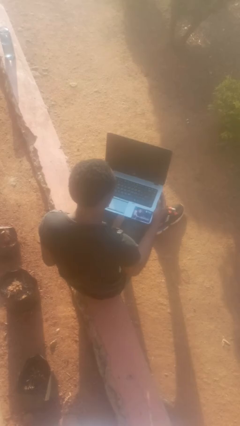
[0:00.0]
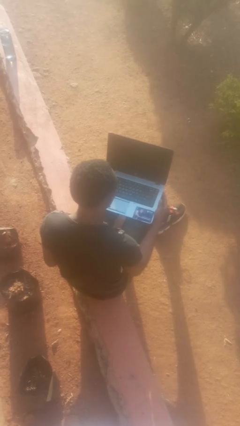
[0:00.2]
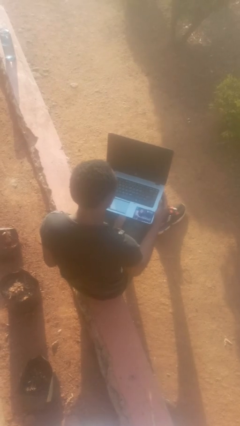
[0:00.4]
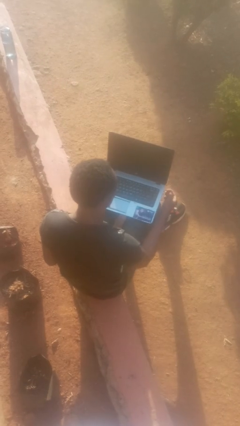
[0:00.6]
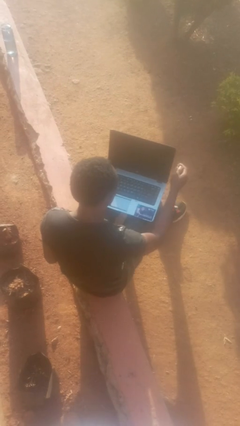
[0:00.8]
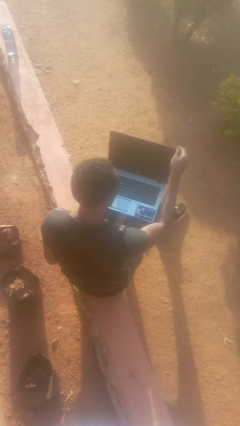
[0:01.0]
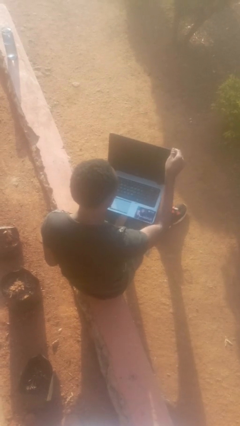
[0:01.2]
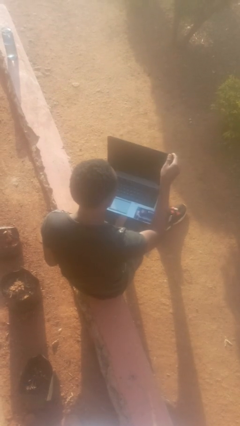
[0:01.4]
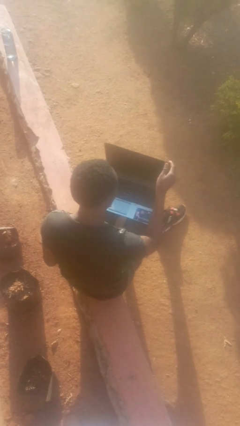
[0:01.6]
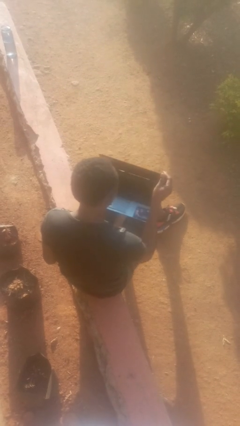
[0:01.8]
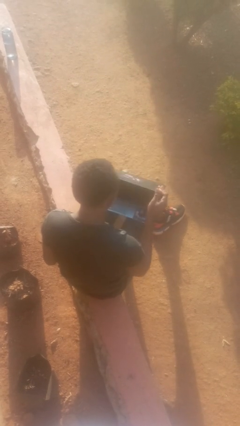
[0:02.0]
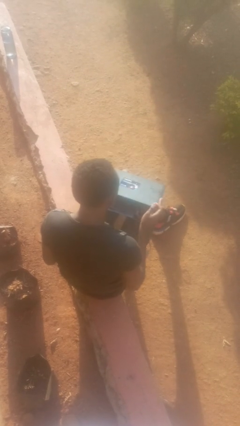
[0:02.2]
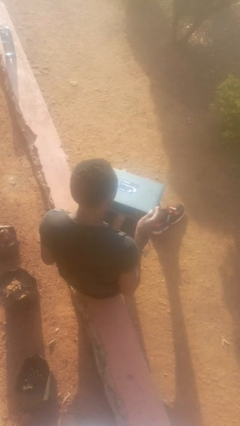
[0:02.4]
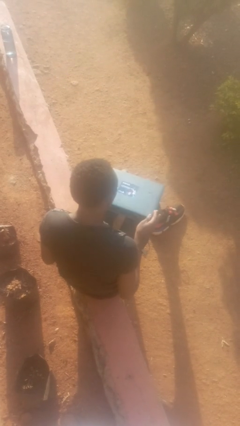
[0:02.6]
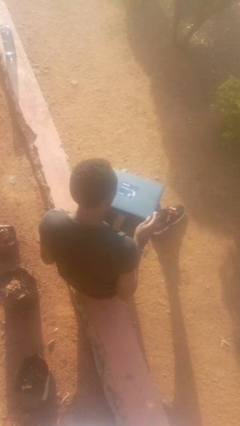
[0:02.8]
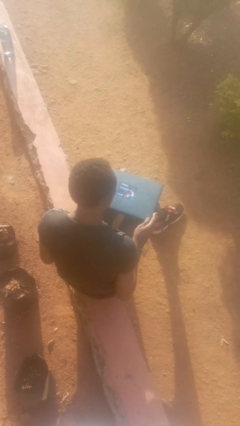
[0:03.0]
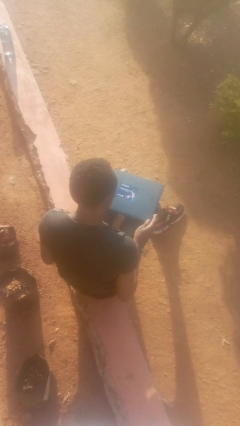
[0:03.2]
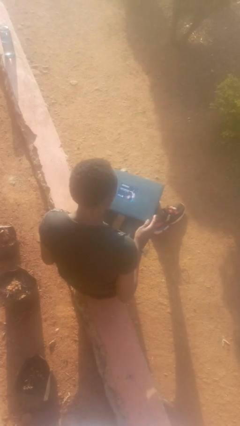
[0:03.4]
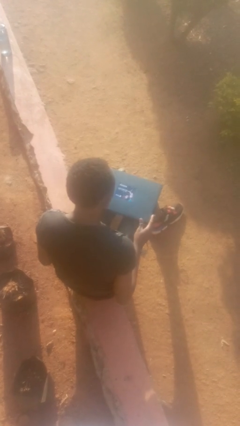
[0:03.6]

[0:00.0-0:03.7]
person closes laptop

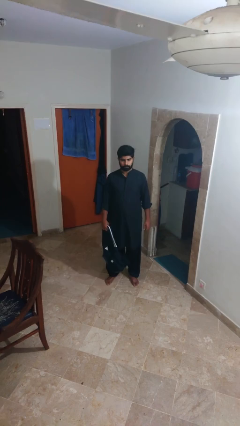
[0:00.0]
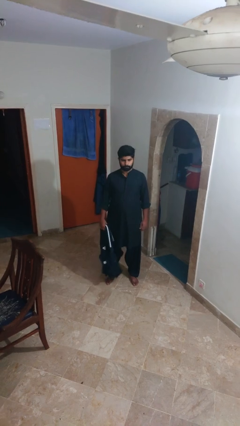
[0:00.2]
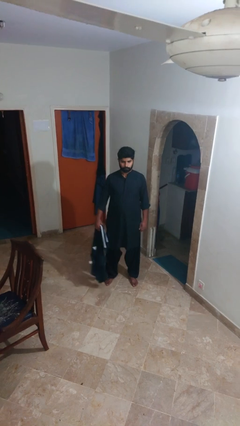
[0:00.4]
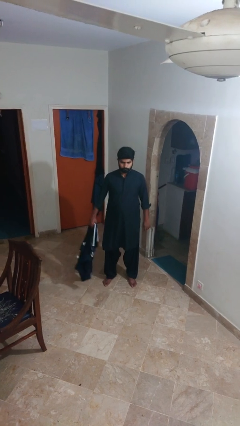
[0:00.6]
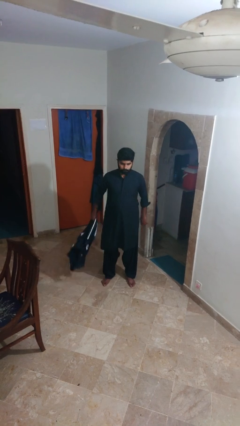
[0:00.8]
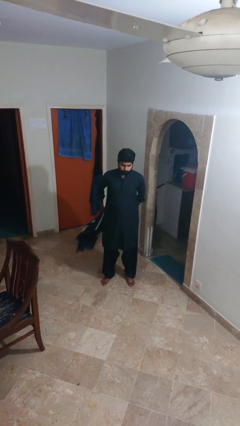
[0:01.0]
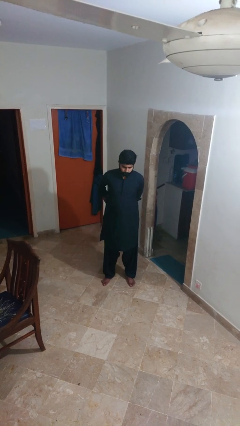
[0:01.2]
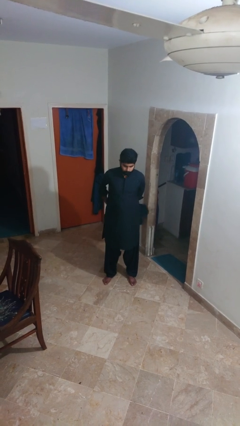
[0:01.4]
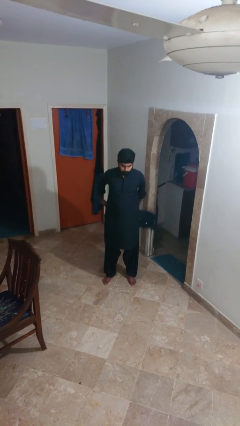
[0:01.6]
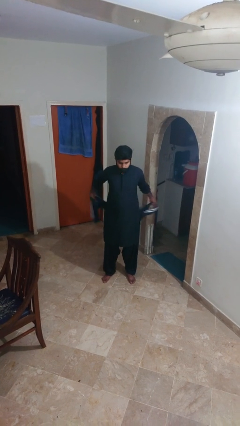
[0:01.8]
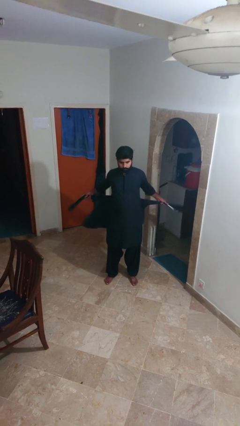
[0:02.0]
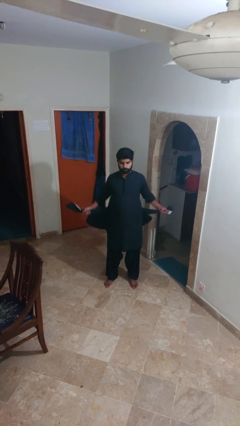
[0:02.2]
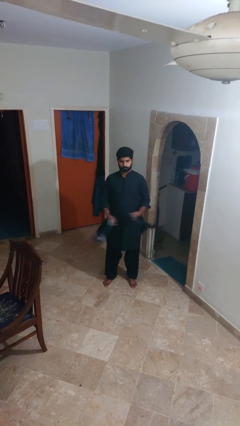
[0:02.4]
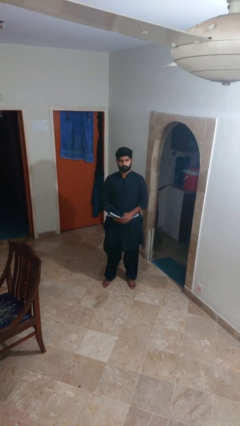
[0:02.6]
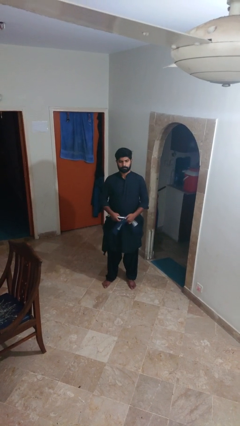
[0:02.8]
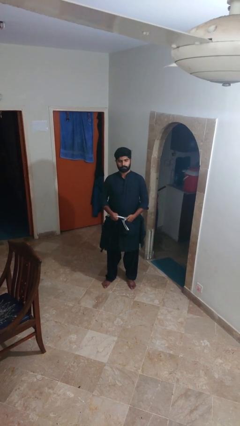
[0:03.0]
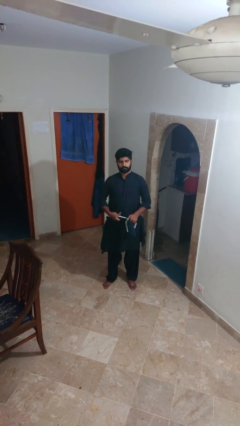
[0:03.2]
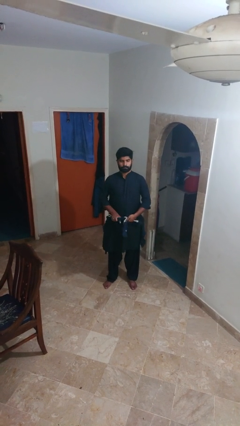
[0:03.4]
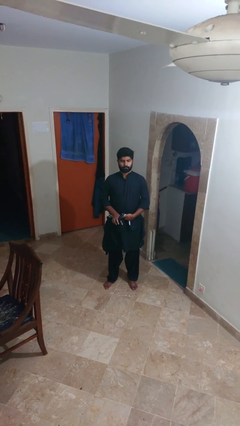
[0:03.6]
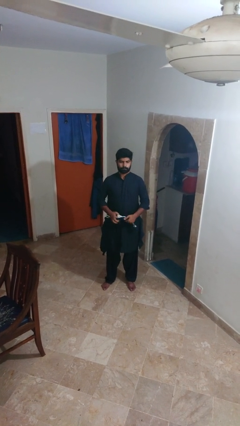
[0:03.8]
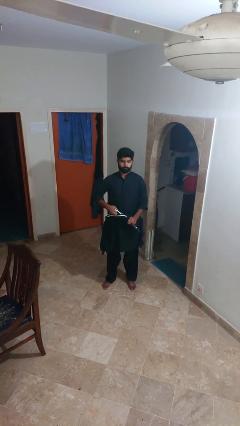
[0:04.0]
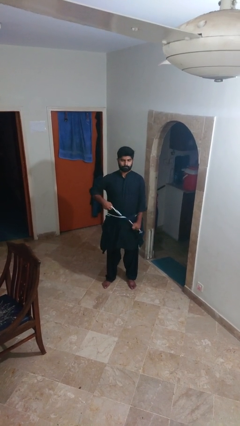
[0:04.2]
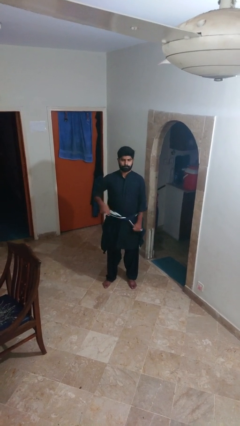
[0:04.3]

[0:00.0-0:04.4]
person ties jacket around waist

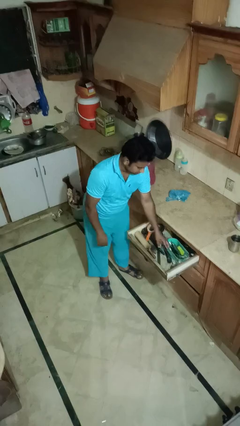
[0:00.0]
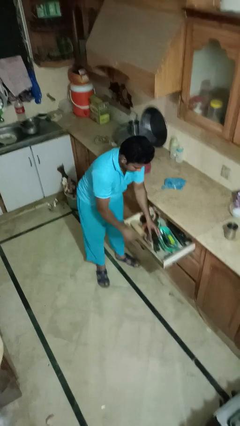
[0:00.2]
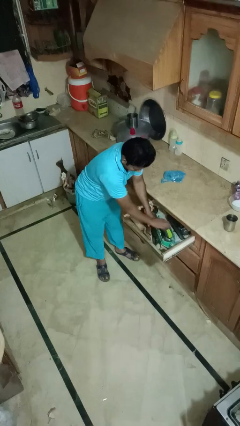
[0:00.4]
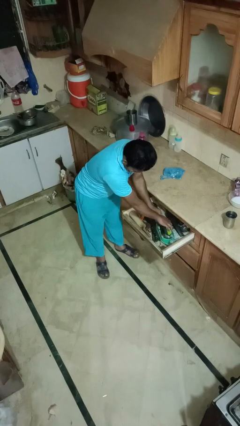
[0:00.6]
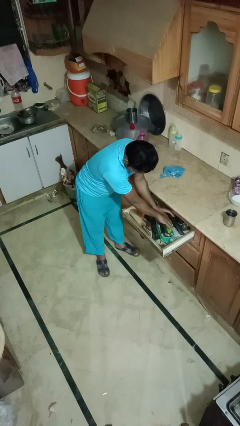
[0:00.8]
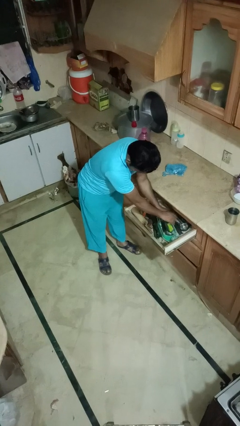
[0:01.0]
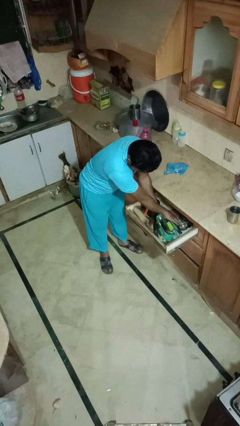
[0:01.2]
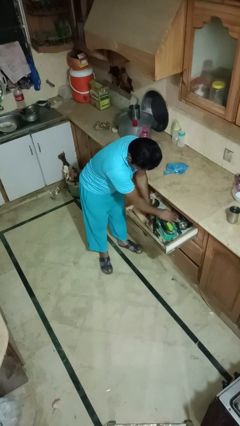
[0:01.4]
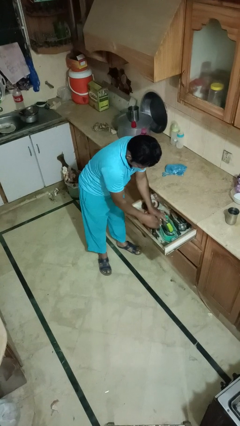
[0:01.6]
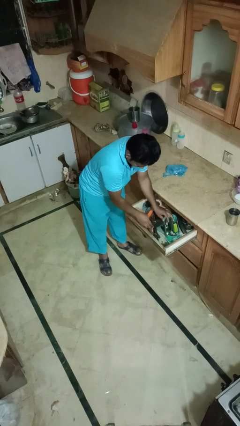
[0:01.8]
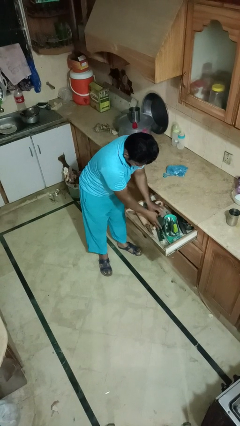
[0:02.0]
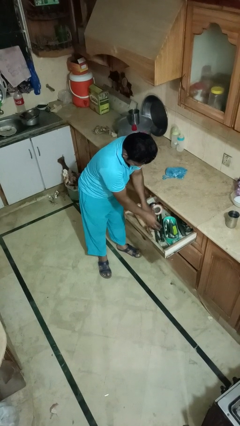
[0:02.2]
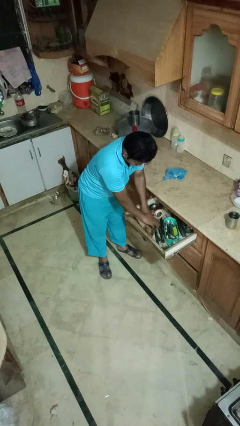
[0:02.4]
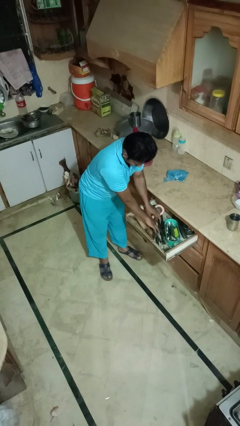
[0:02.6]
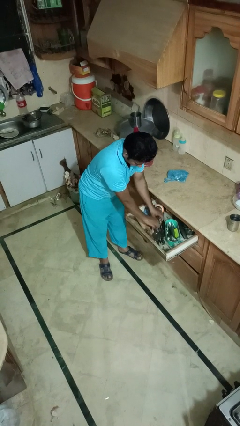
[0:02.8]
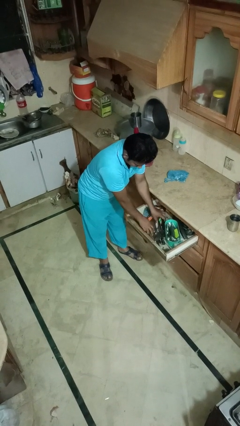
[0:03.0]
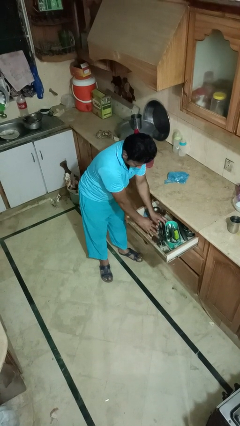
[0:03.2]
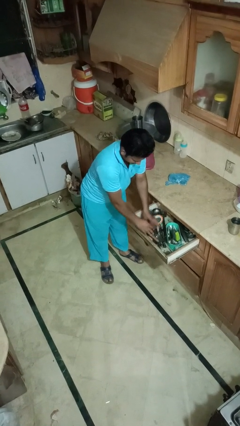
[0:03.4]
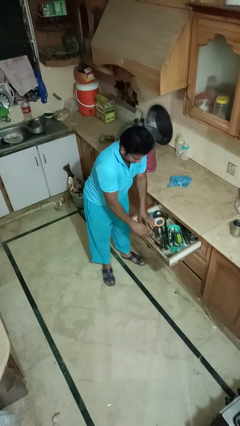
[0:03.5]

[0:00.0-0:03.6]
person searches in kitchen drawer

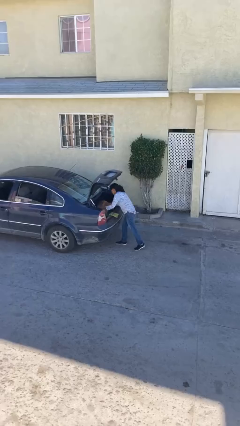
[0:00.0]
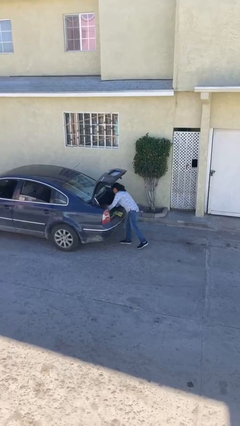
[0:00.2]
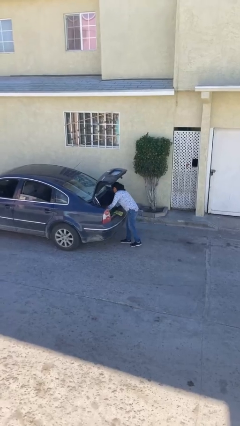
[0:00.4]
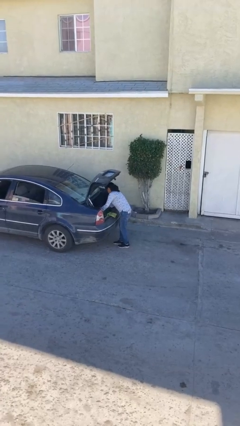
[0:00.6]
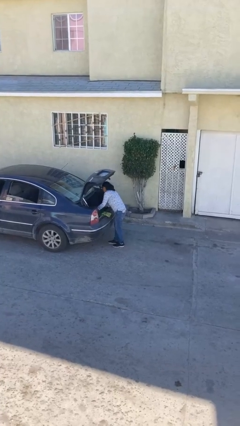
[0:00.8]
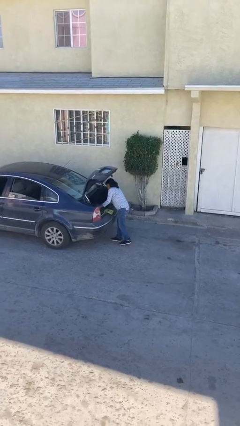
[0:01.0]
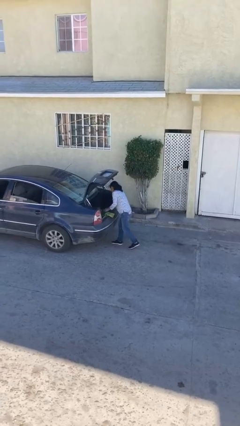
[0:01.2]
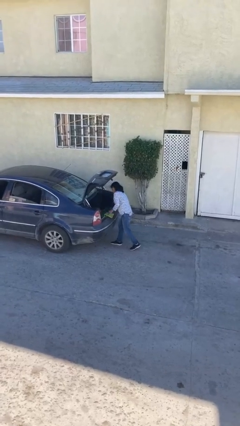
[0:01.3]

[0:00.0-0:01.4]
person loads car

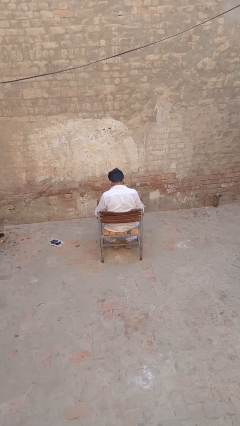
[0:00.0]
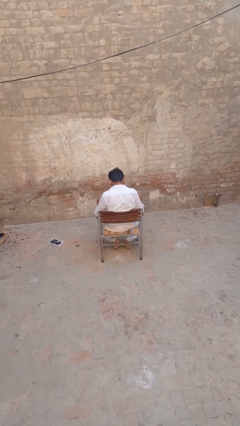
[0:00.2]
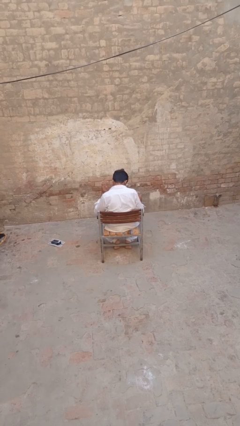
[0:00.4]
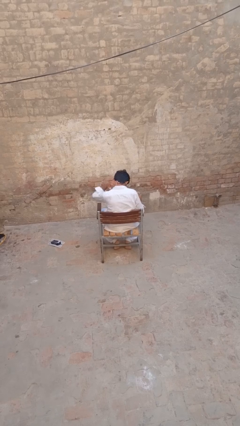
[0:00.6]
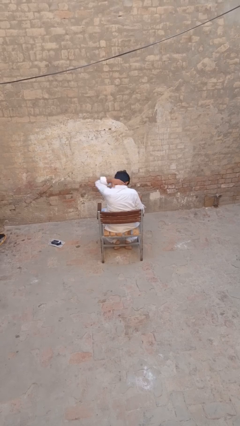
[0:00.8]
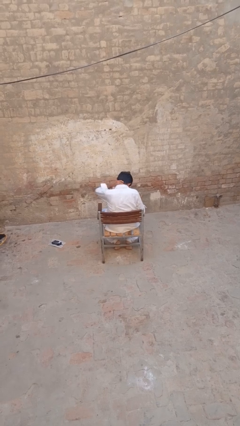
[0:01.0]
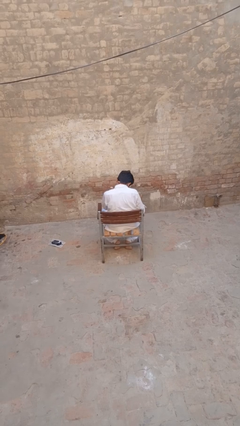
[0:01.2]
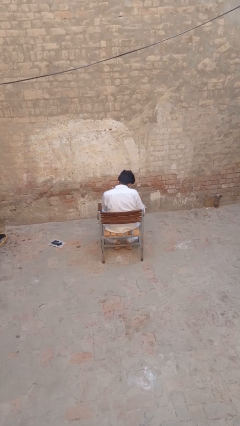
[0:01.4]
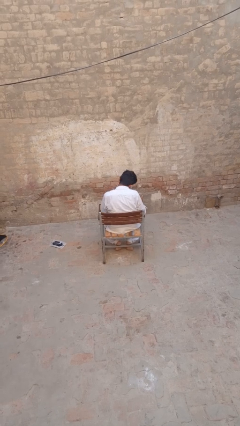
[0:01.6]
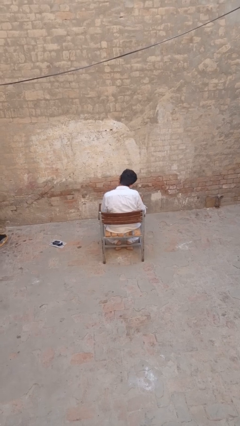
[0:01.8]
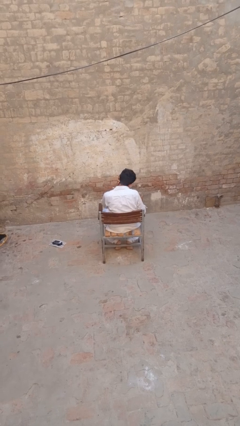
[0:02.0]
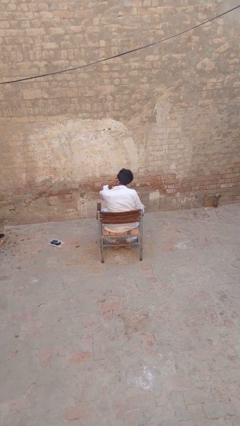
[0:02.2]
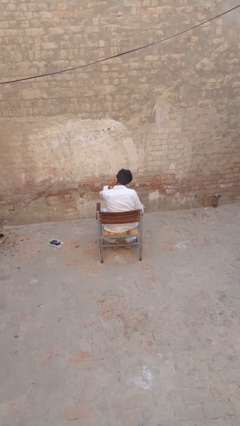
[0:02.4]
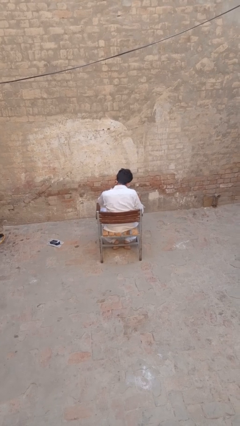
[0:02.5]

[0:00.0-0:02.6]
person rubs neck

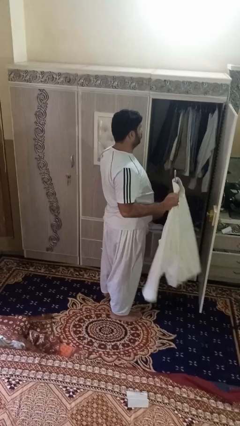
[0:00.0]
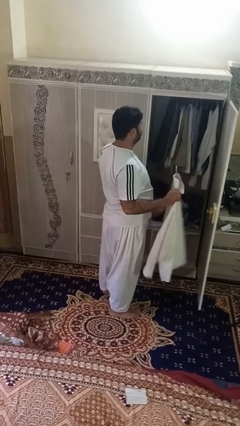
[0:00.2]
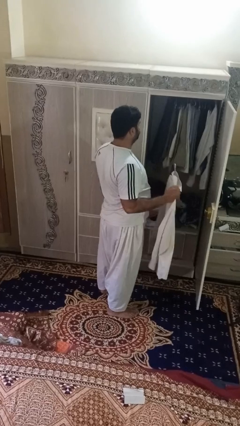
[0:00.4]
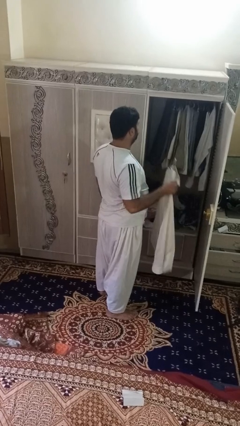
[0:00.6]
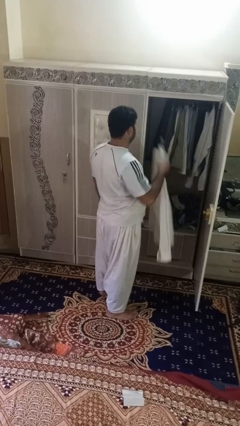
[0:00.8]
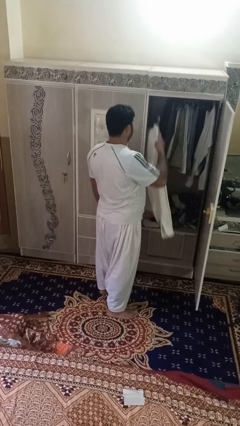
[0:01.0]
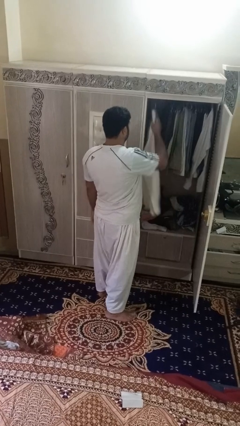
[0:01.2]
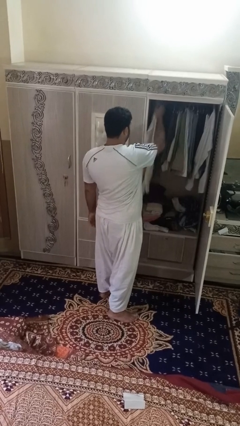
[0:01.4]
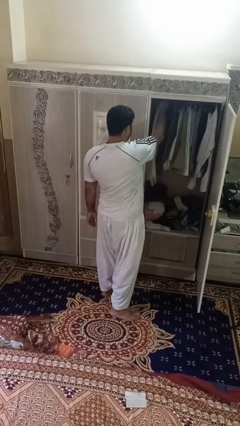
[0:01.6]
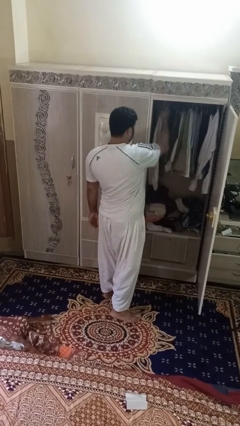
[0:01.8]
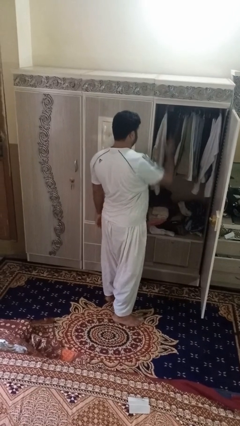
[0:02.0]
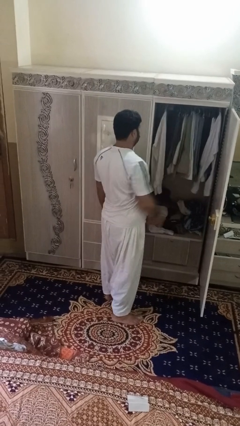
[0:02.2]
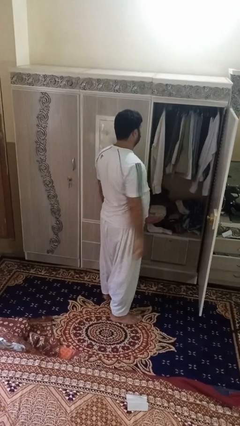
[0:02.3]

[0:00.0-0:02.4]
person puts clothes into closet
